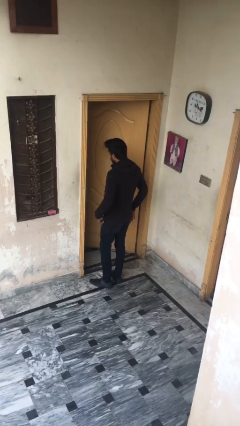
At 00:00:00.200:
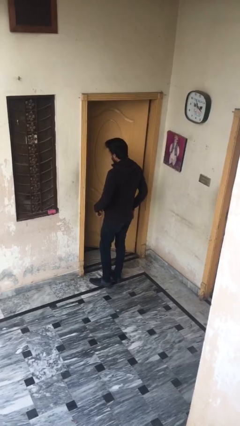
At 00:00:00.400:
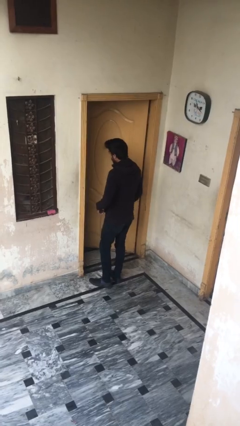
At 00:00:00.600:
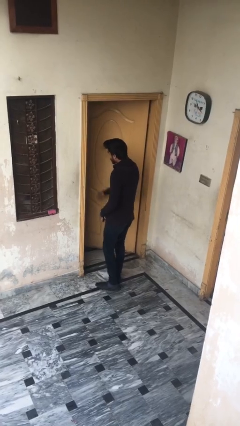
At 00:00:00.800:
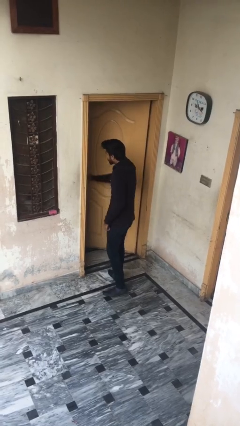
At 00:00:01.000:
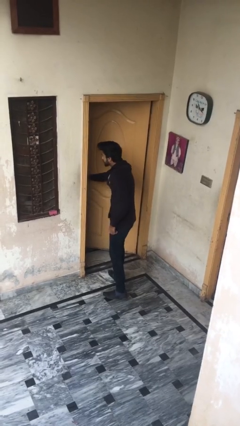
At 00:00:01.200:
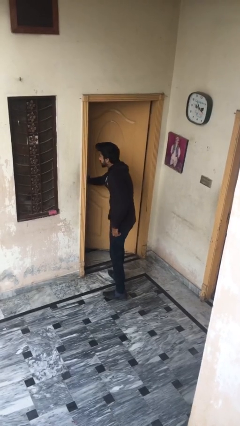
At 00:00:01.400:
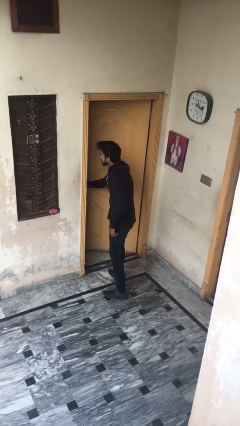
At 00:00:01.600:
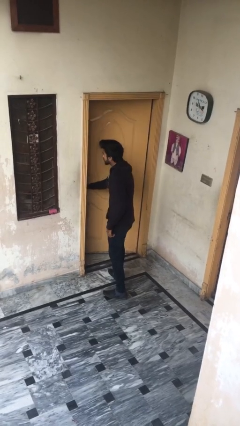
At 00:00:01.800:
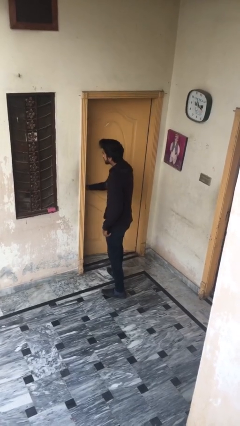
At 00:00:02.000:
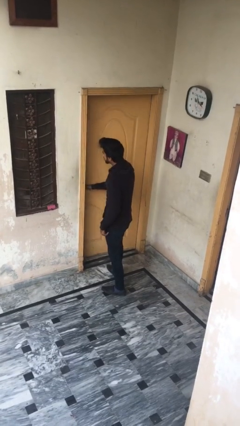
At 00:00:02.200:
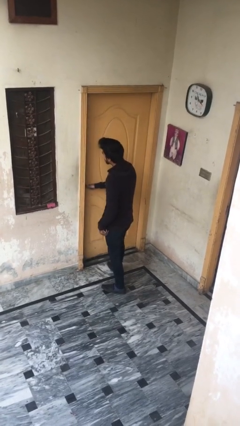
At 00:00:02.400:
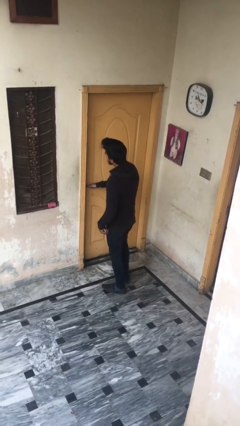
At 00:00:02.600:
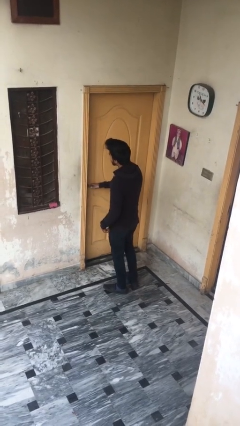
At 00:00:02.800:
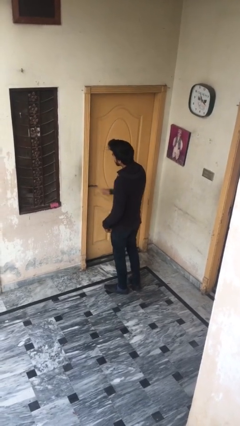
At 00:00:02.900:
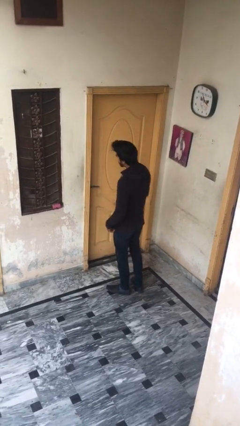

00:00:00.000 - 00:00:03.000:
person closes facility door

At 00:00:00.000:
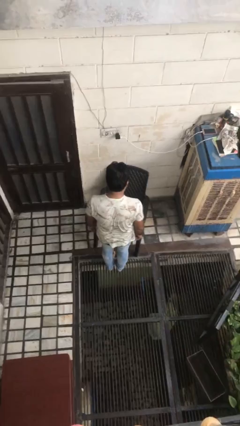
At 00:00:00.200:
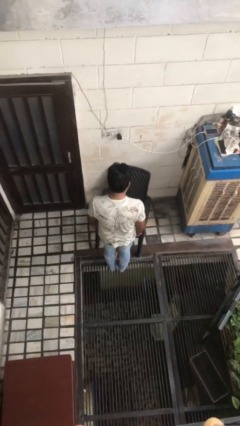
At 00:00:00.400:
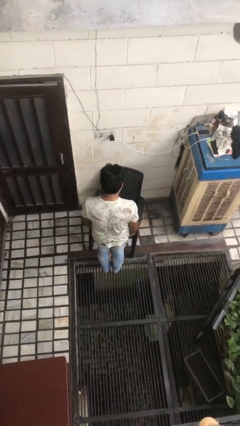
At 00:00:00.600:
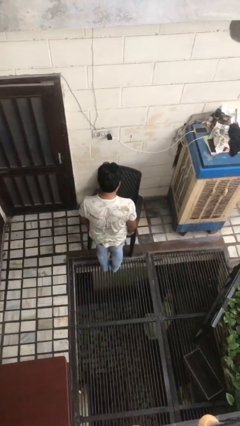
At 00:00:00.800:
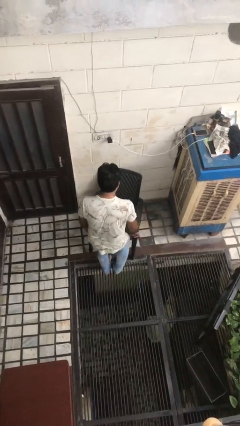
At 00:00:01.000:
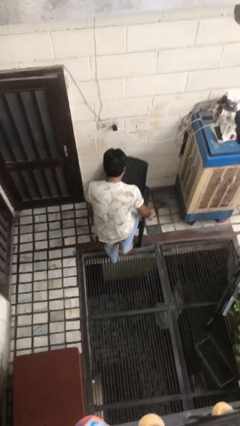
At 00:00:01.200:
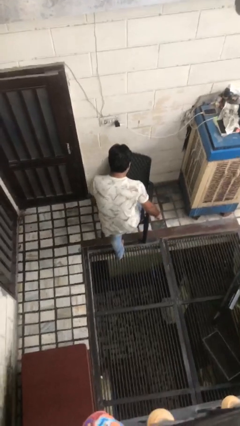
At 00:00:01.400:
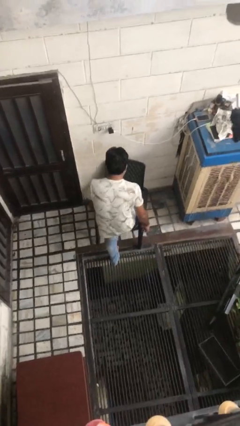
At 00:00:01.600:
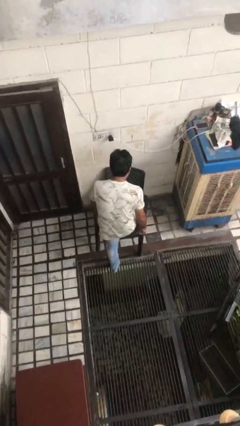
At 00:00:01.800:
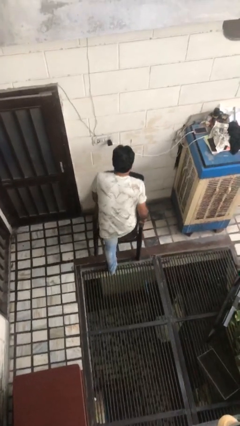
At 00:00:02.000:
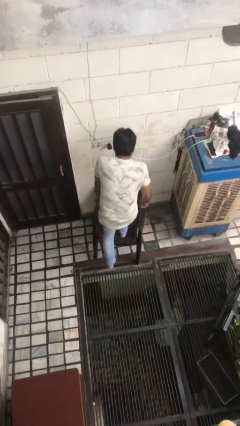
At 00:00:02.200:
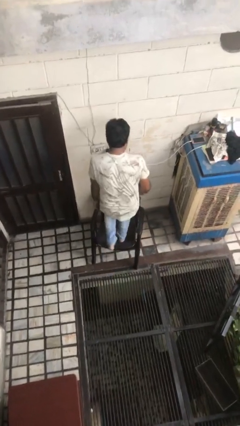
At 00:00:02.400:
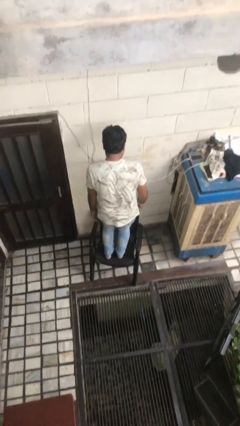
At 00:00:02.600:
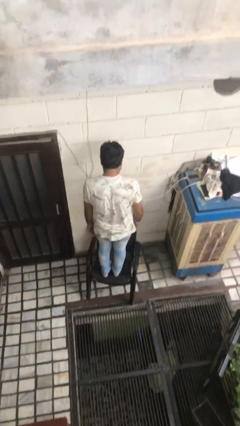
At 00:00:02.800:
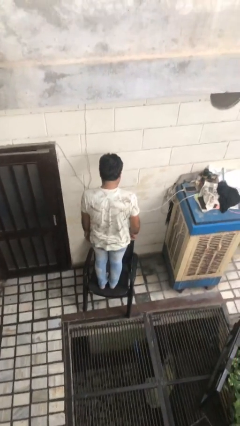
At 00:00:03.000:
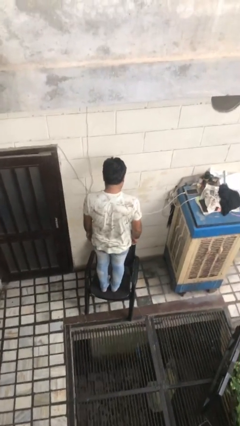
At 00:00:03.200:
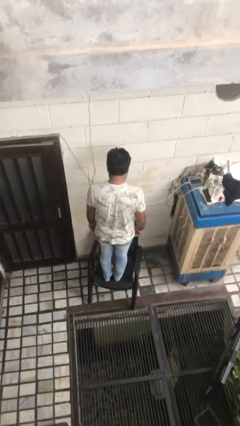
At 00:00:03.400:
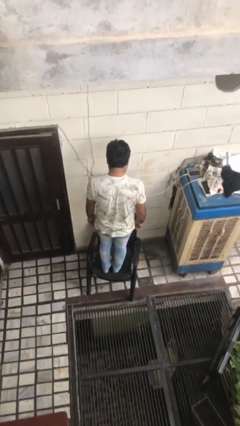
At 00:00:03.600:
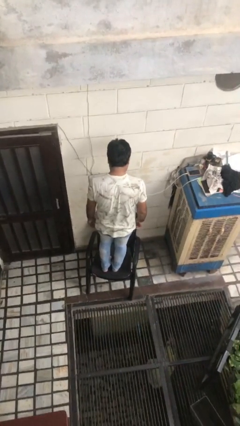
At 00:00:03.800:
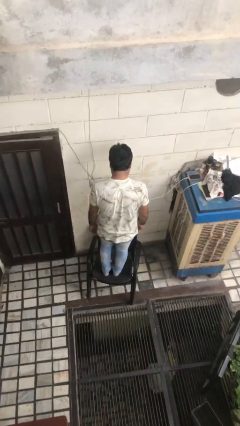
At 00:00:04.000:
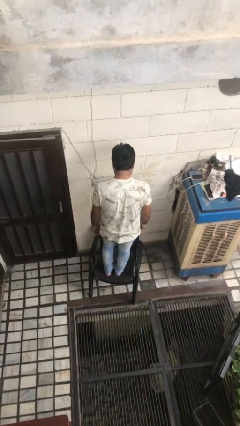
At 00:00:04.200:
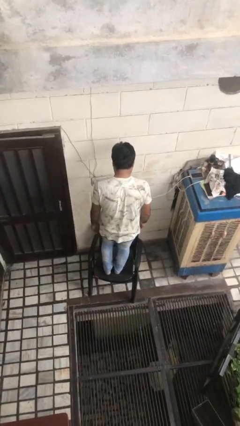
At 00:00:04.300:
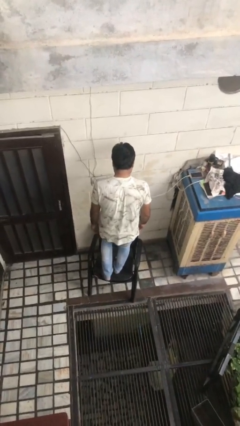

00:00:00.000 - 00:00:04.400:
person climbs on chair

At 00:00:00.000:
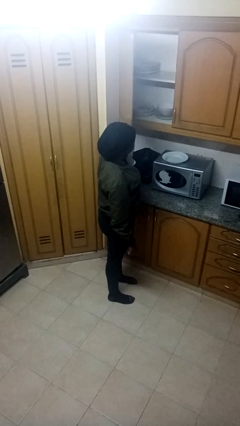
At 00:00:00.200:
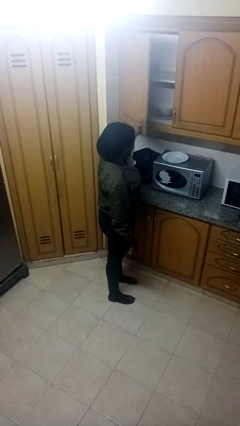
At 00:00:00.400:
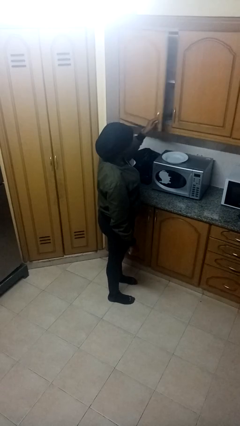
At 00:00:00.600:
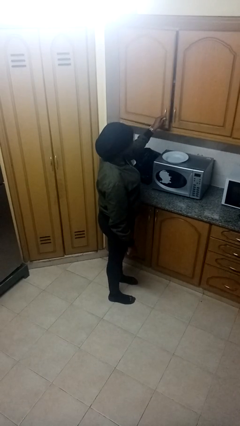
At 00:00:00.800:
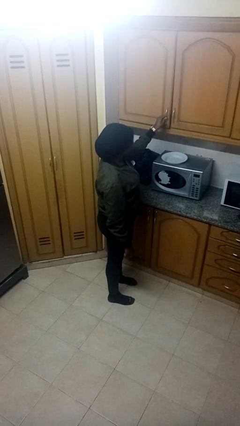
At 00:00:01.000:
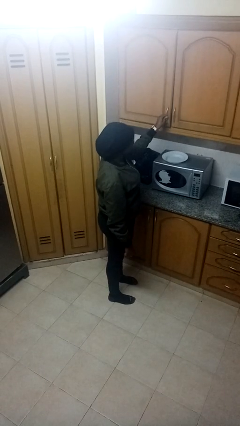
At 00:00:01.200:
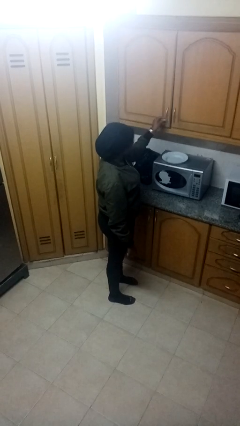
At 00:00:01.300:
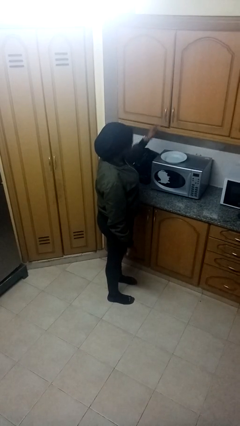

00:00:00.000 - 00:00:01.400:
person closes cabinet

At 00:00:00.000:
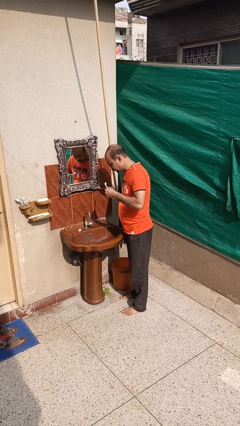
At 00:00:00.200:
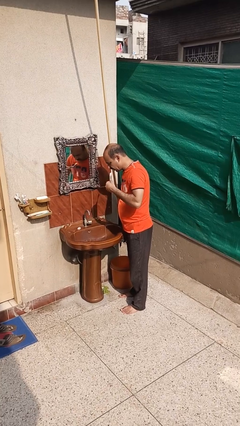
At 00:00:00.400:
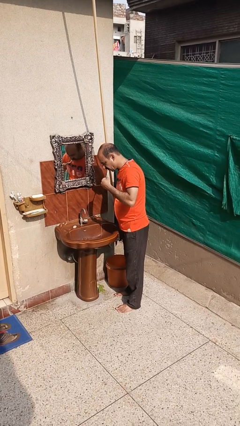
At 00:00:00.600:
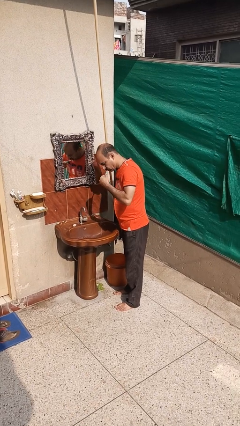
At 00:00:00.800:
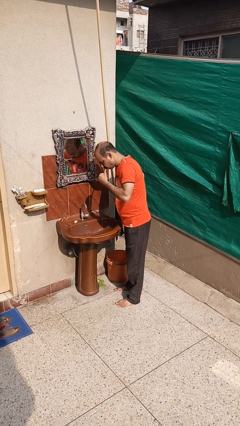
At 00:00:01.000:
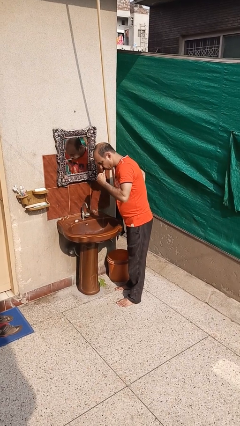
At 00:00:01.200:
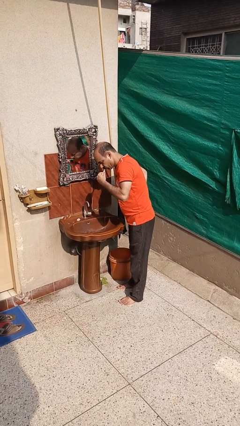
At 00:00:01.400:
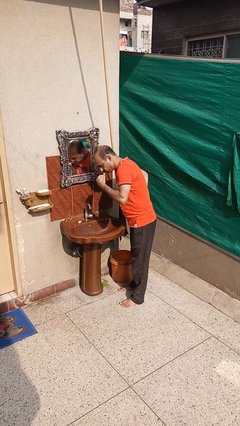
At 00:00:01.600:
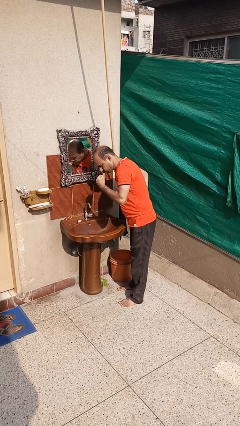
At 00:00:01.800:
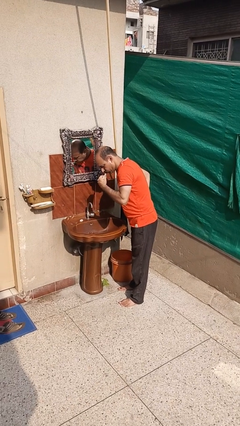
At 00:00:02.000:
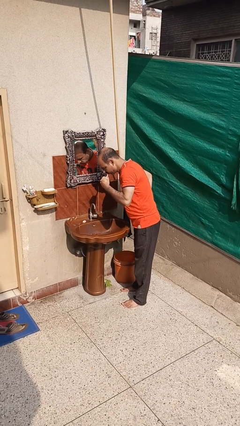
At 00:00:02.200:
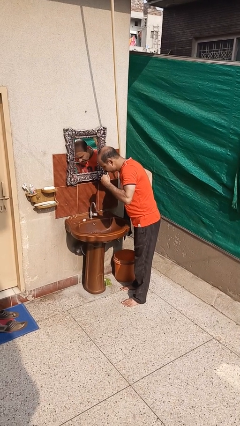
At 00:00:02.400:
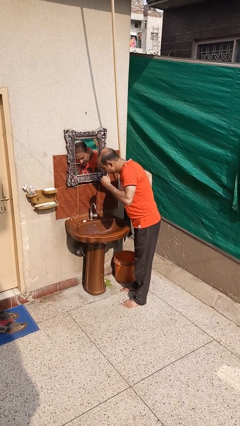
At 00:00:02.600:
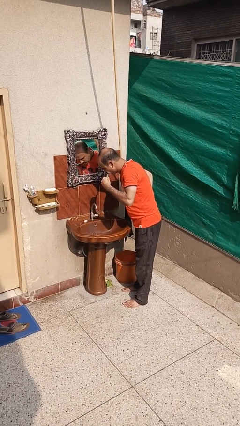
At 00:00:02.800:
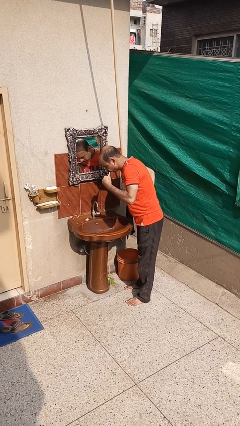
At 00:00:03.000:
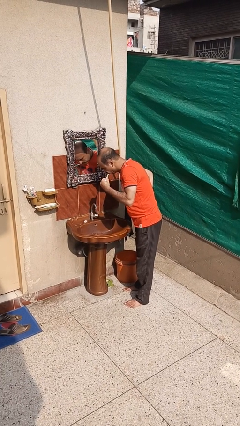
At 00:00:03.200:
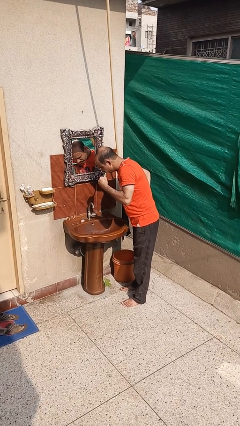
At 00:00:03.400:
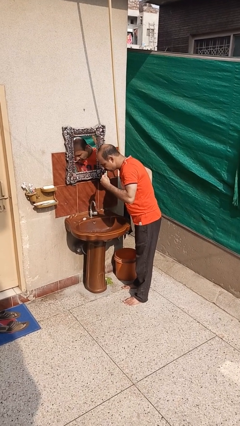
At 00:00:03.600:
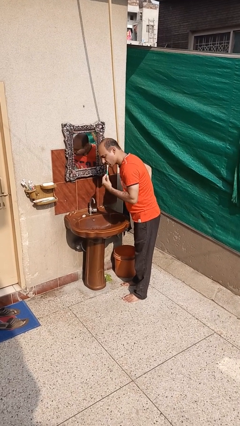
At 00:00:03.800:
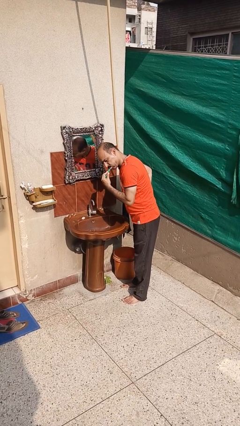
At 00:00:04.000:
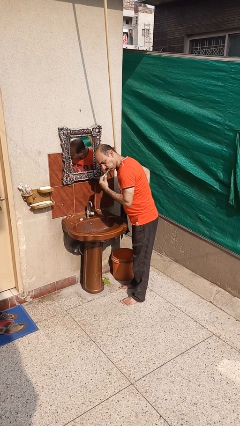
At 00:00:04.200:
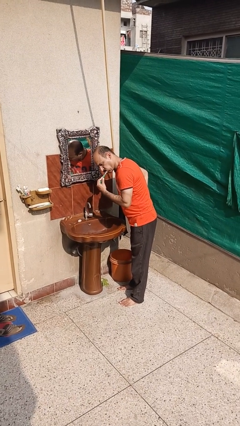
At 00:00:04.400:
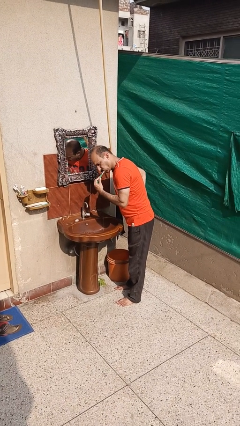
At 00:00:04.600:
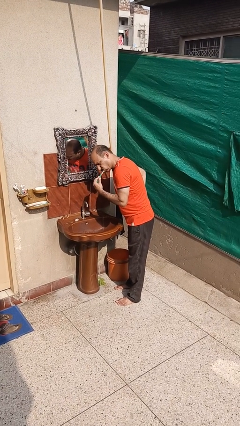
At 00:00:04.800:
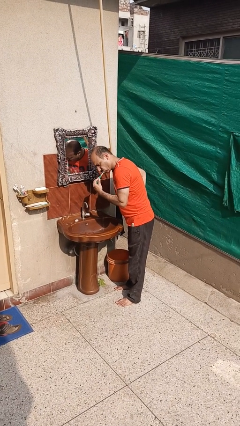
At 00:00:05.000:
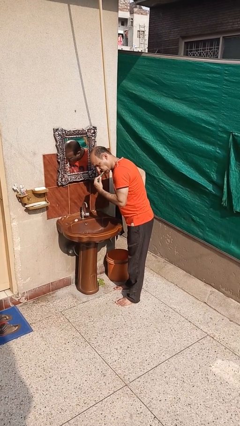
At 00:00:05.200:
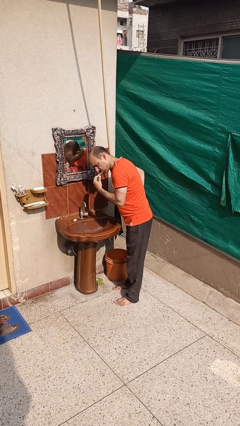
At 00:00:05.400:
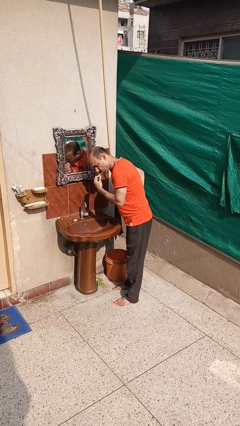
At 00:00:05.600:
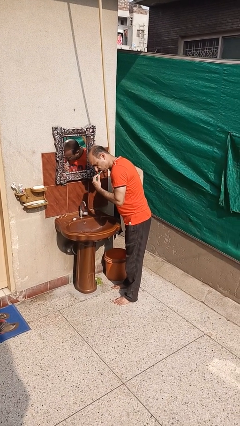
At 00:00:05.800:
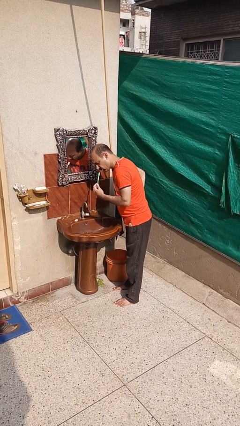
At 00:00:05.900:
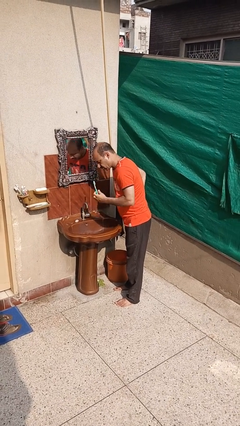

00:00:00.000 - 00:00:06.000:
person brushes teeth

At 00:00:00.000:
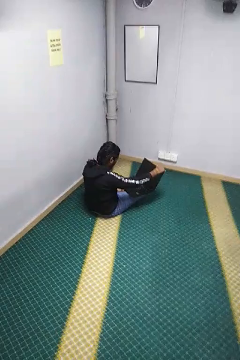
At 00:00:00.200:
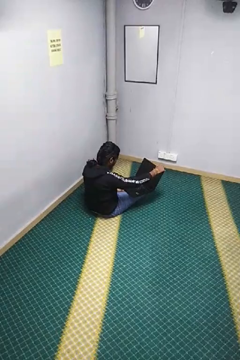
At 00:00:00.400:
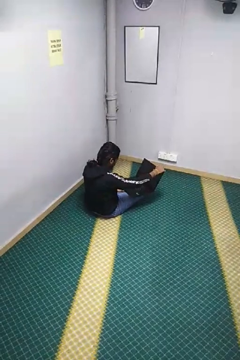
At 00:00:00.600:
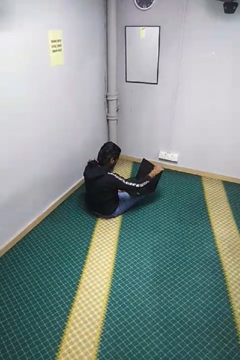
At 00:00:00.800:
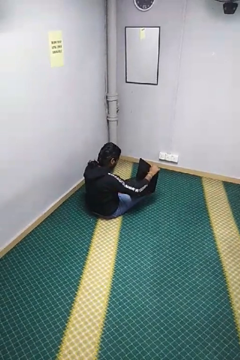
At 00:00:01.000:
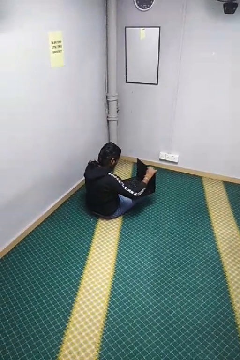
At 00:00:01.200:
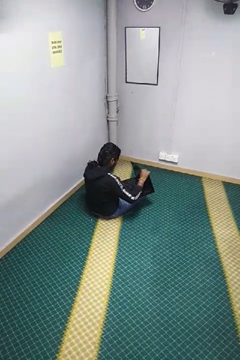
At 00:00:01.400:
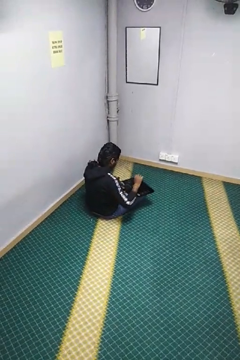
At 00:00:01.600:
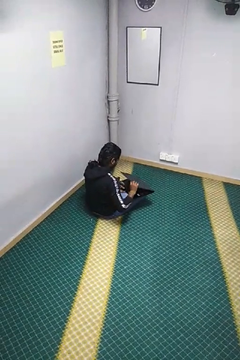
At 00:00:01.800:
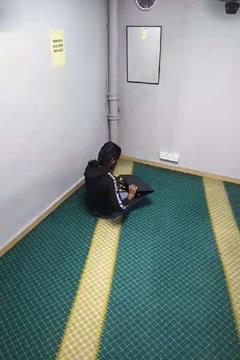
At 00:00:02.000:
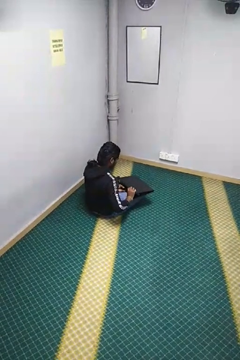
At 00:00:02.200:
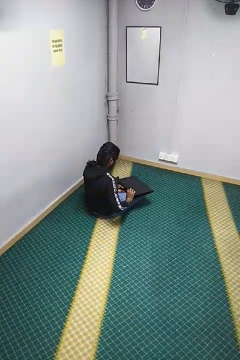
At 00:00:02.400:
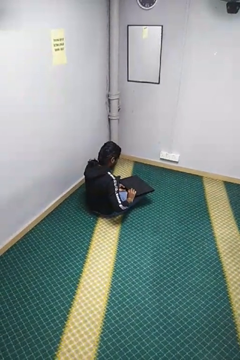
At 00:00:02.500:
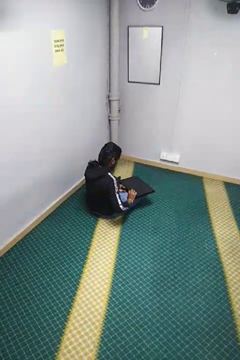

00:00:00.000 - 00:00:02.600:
person closes laptop
